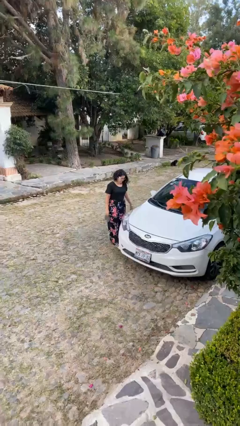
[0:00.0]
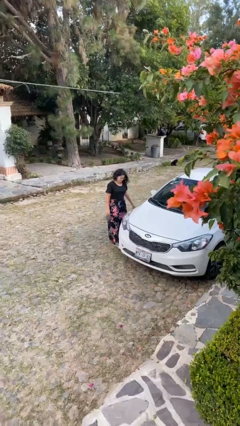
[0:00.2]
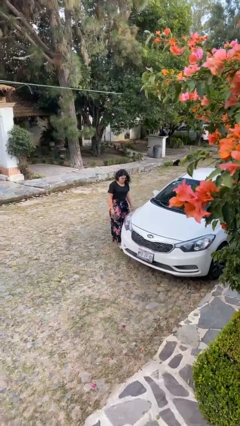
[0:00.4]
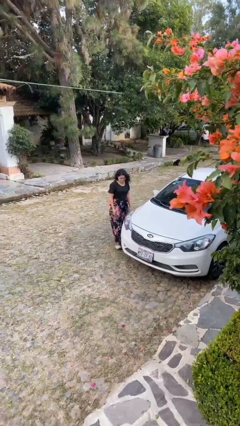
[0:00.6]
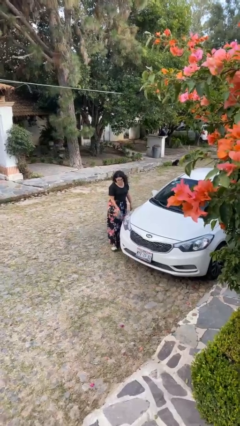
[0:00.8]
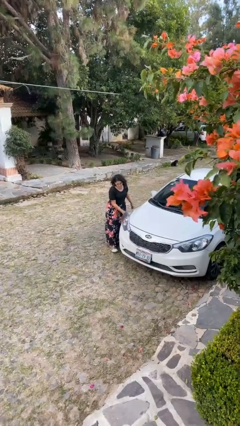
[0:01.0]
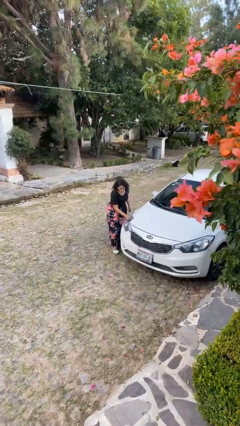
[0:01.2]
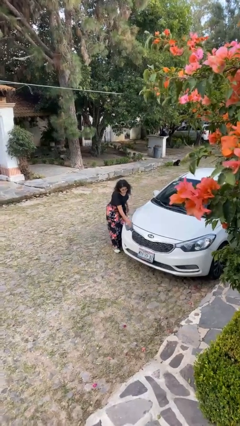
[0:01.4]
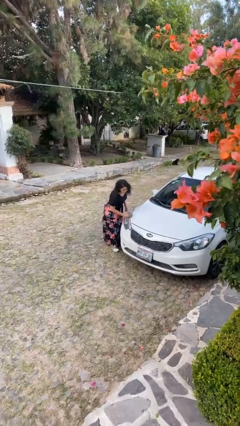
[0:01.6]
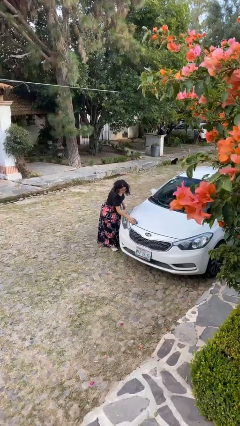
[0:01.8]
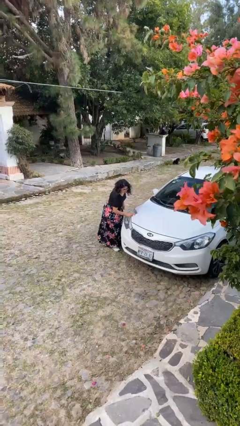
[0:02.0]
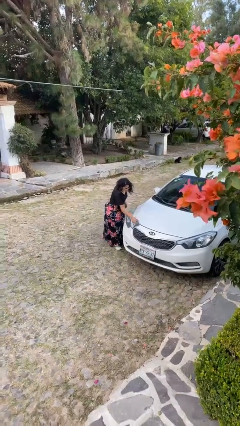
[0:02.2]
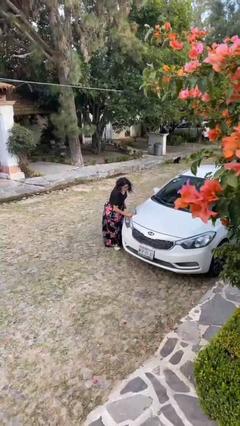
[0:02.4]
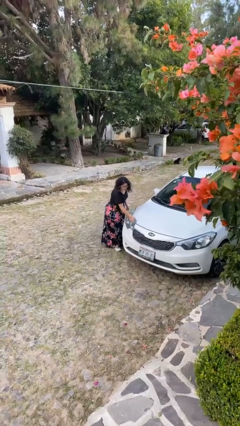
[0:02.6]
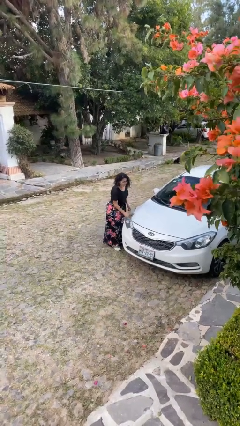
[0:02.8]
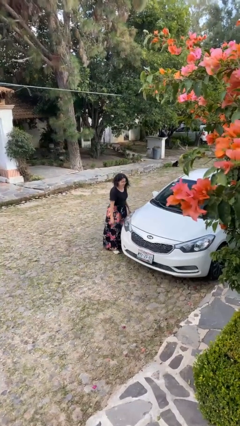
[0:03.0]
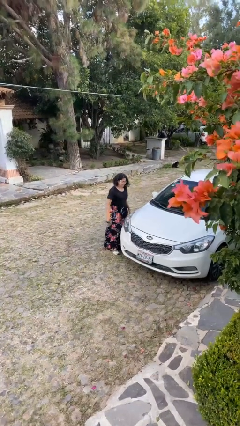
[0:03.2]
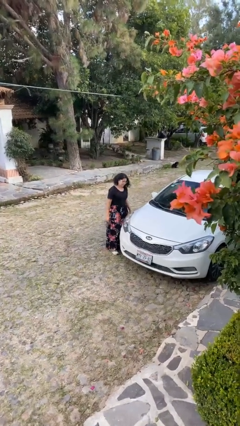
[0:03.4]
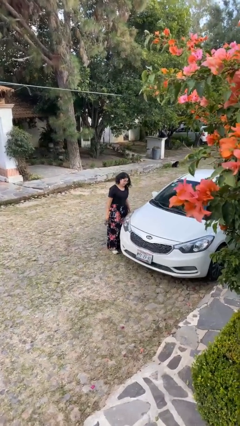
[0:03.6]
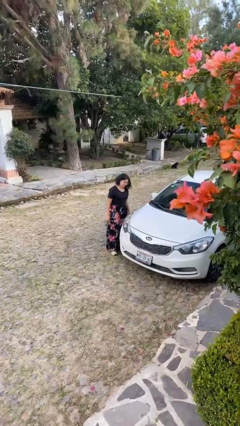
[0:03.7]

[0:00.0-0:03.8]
person polishes car with rag

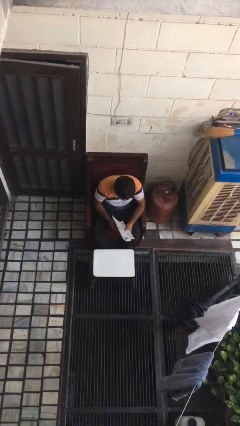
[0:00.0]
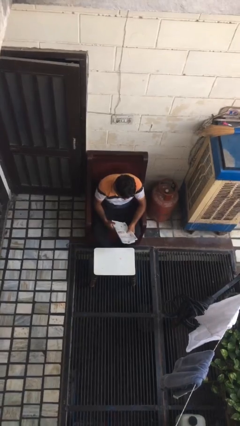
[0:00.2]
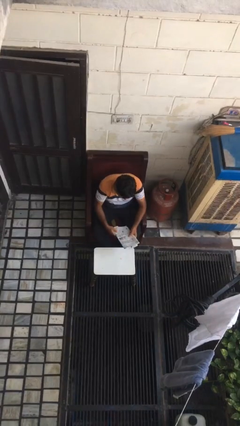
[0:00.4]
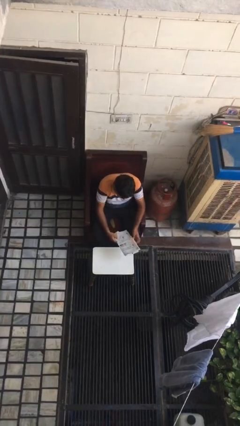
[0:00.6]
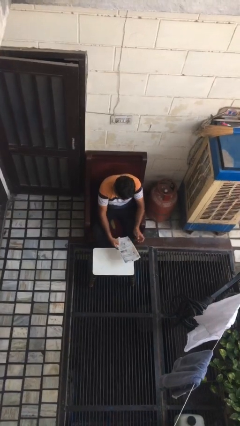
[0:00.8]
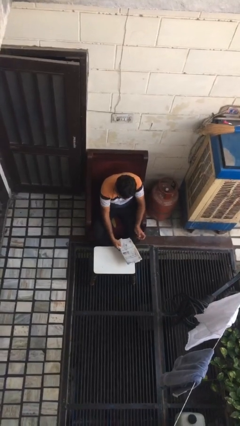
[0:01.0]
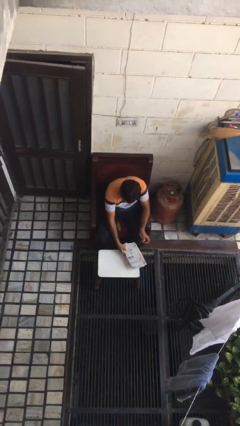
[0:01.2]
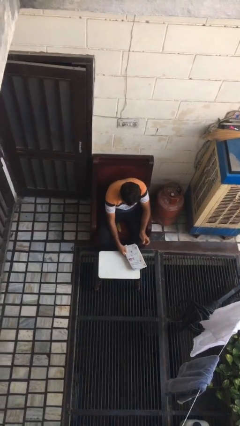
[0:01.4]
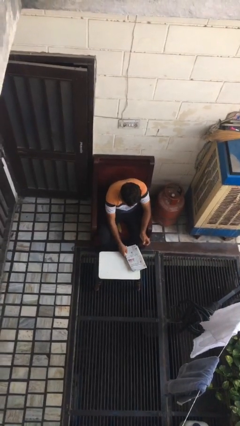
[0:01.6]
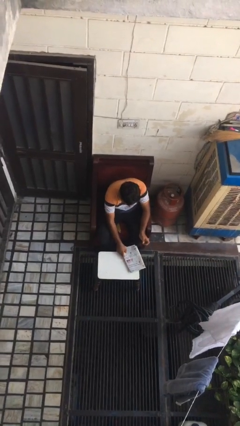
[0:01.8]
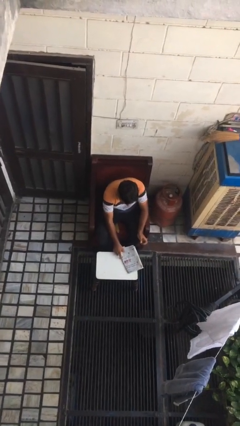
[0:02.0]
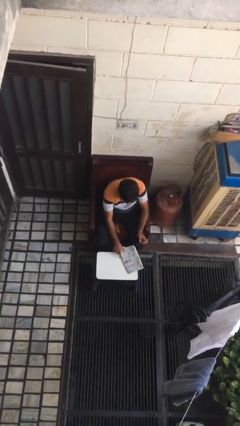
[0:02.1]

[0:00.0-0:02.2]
person puts down object on table

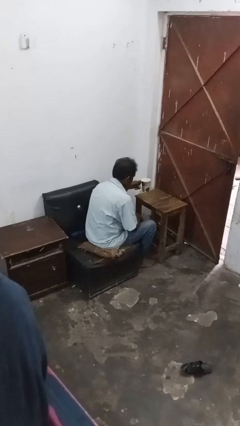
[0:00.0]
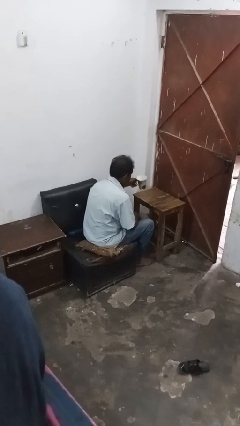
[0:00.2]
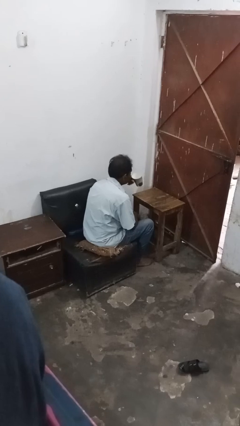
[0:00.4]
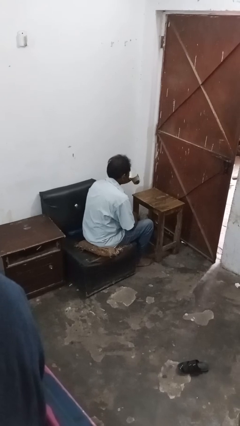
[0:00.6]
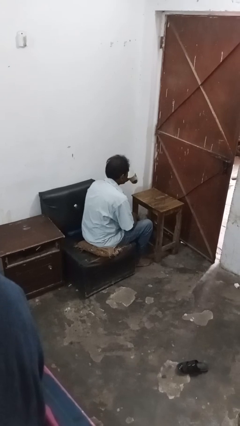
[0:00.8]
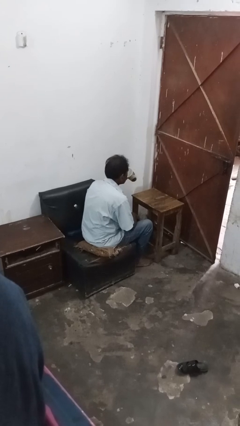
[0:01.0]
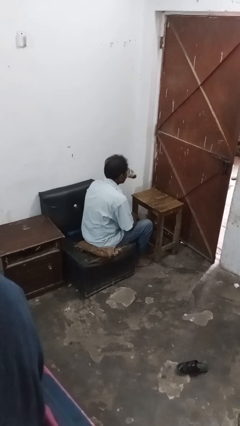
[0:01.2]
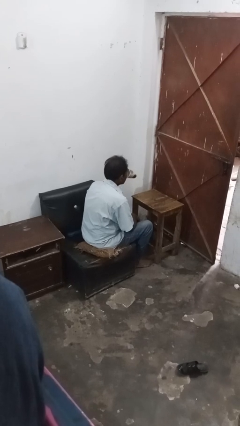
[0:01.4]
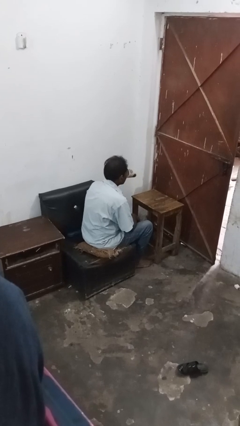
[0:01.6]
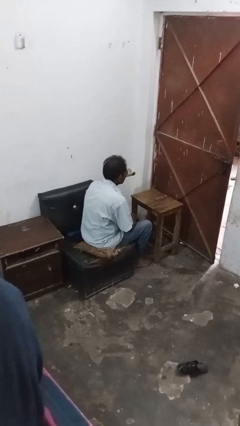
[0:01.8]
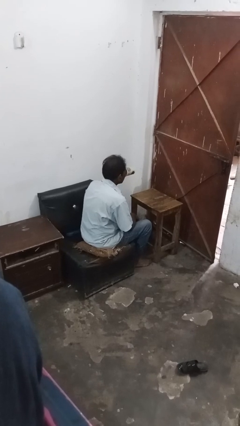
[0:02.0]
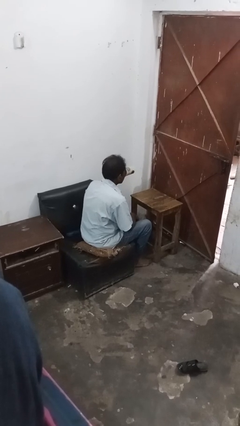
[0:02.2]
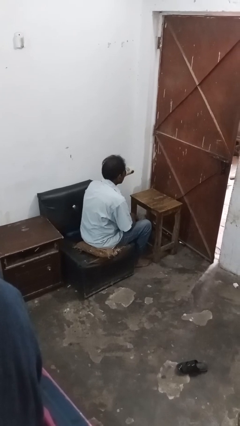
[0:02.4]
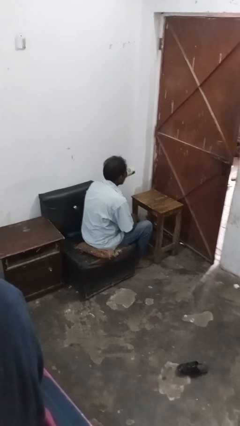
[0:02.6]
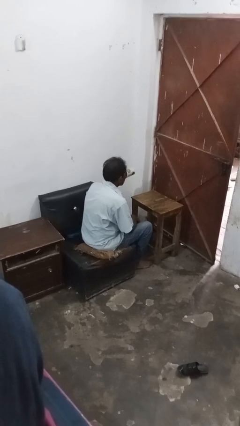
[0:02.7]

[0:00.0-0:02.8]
person drinks from mug

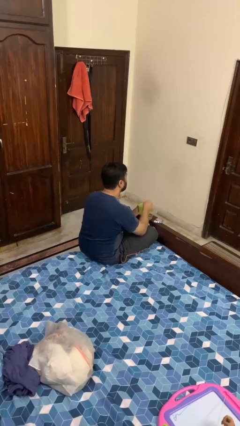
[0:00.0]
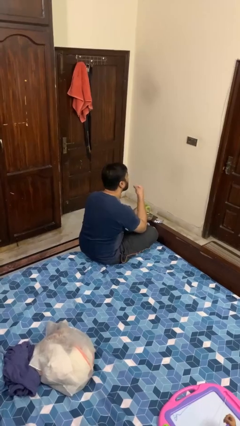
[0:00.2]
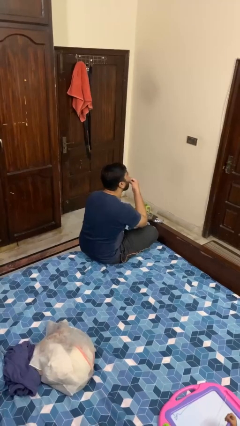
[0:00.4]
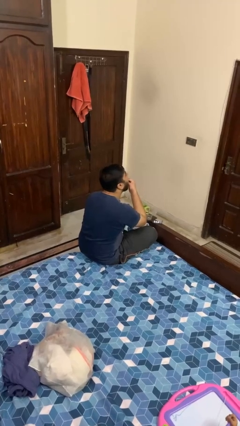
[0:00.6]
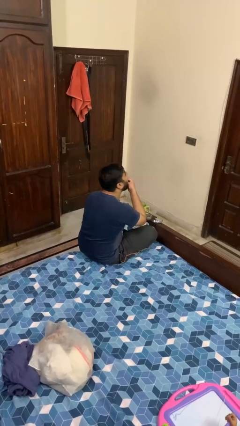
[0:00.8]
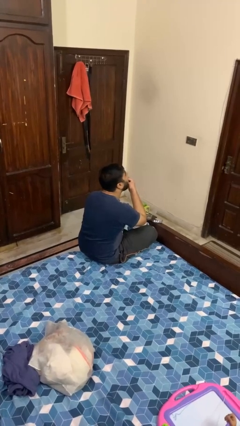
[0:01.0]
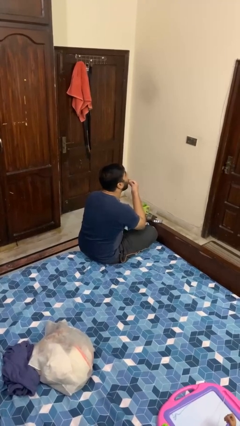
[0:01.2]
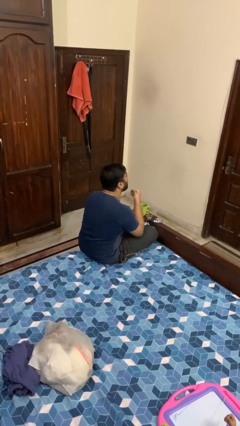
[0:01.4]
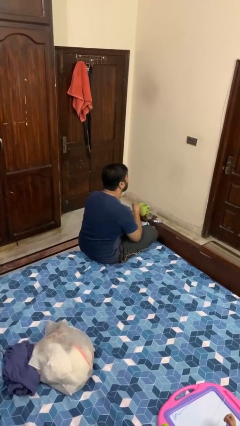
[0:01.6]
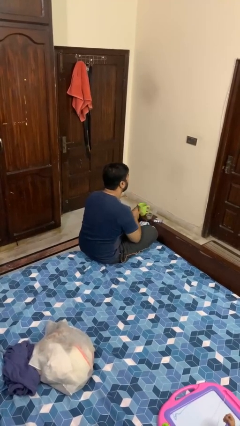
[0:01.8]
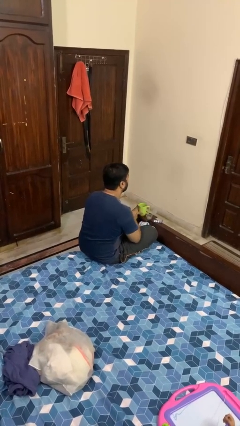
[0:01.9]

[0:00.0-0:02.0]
person takes medicine pills

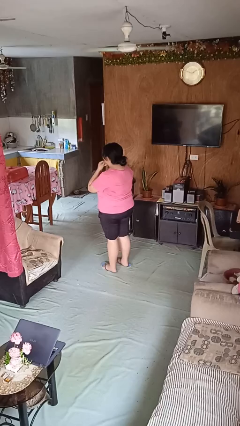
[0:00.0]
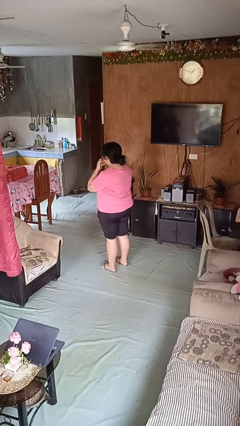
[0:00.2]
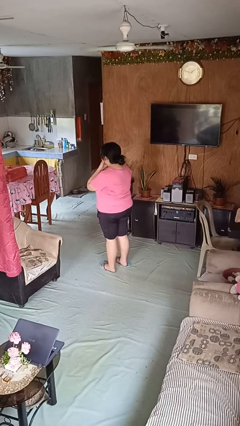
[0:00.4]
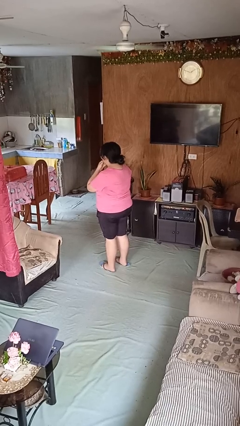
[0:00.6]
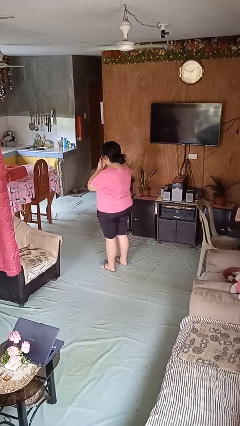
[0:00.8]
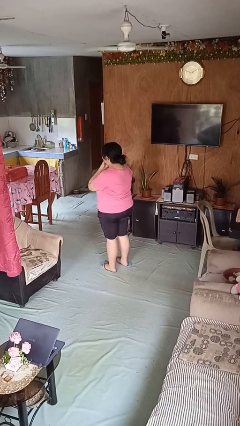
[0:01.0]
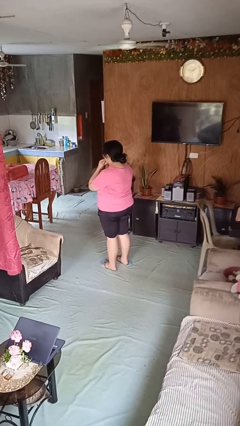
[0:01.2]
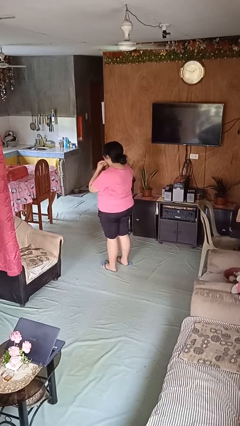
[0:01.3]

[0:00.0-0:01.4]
person strokes chin

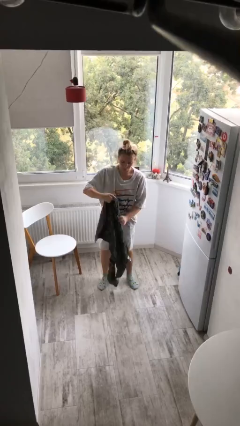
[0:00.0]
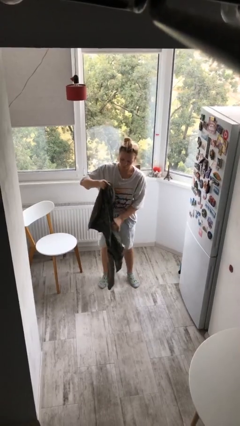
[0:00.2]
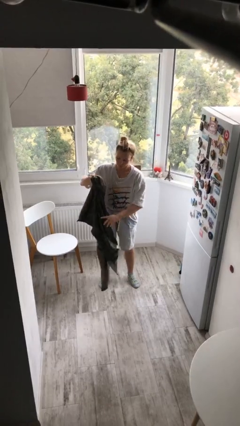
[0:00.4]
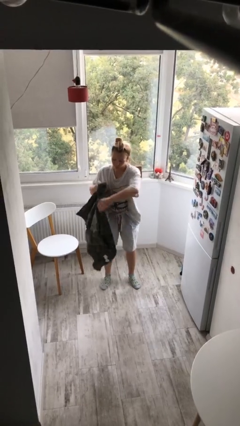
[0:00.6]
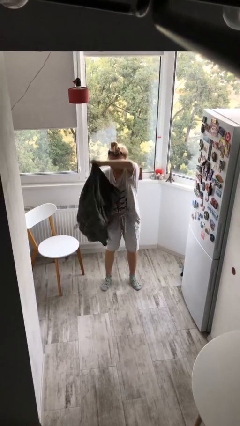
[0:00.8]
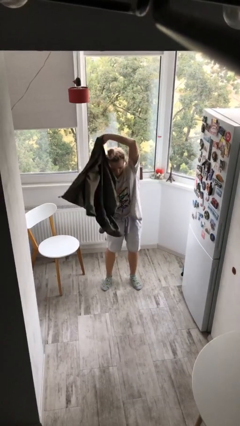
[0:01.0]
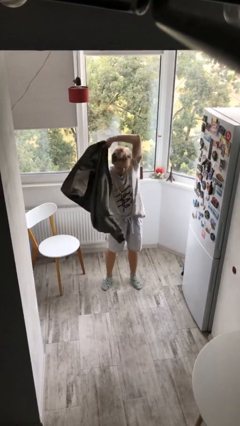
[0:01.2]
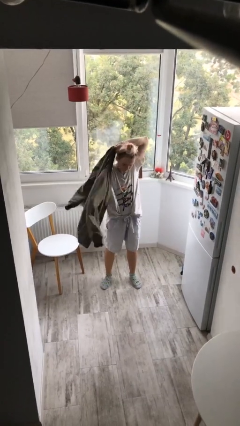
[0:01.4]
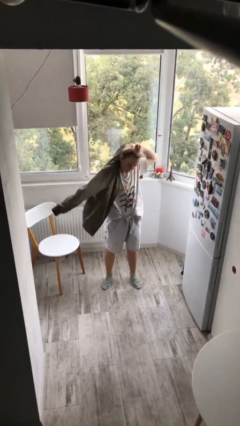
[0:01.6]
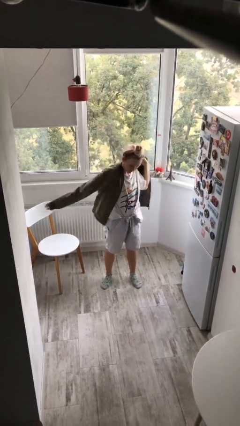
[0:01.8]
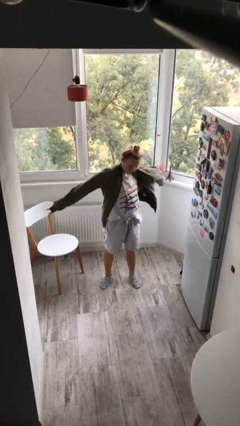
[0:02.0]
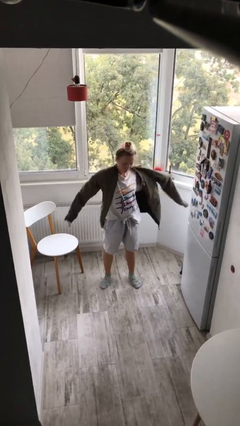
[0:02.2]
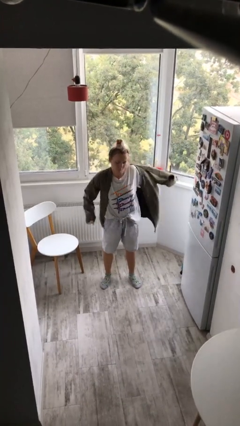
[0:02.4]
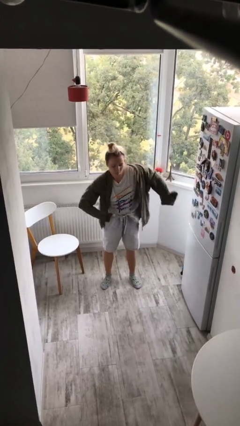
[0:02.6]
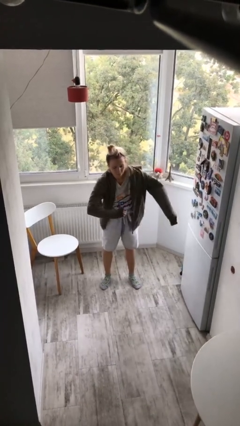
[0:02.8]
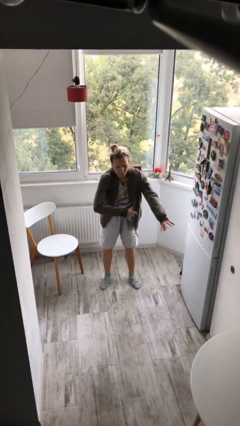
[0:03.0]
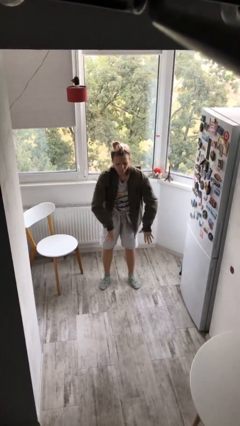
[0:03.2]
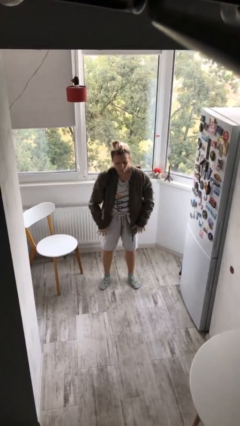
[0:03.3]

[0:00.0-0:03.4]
person puts on jacket

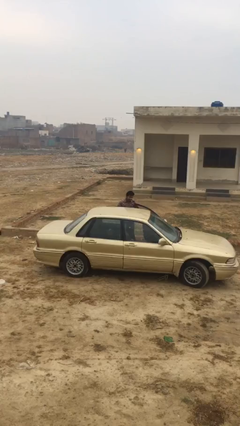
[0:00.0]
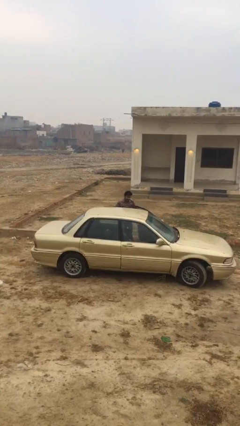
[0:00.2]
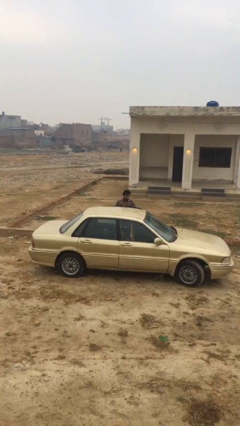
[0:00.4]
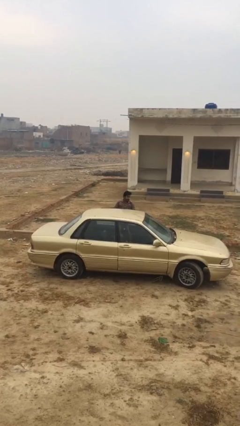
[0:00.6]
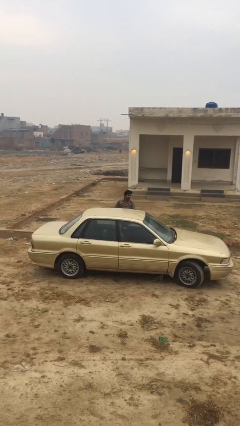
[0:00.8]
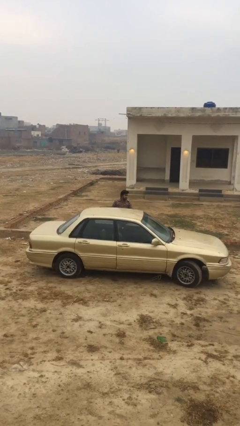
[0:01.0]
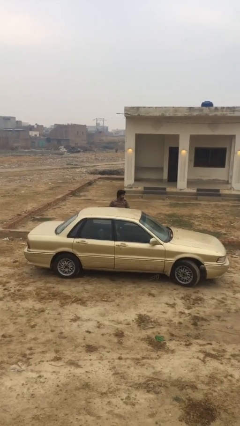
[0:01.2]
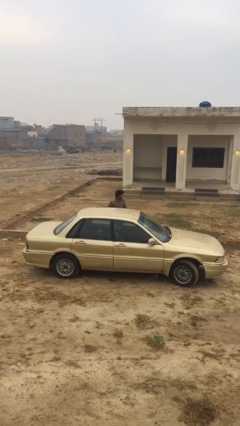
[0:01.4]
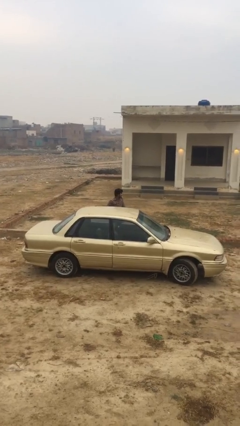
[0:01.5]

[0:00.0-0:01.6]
person closes car door
